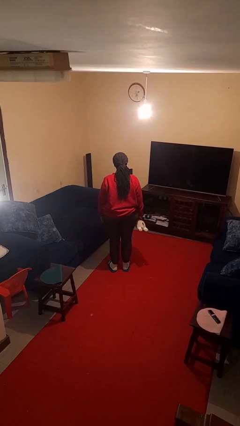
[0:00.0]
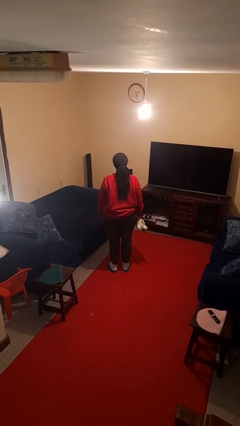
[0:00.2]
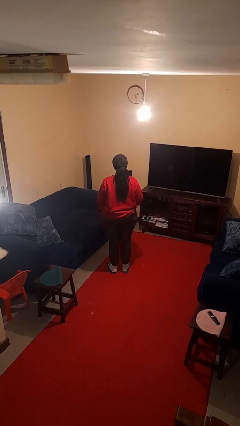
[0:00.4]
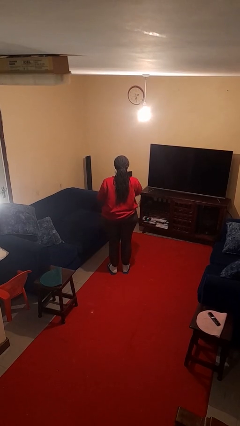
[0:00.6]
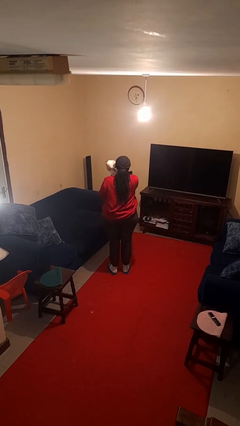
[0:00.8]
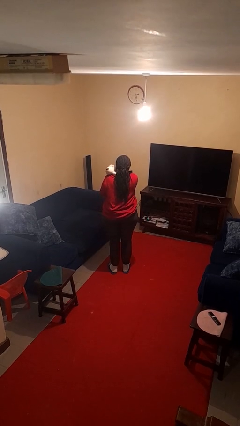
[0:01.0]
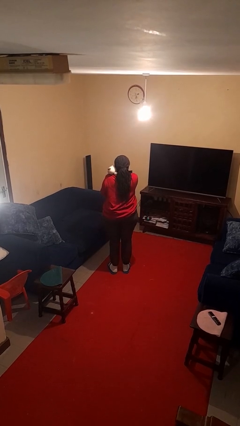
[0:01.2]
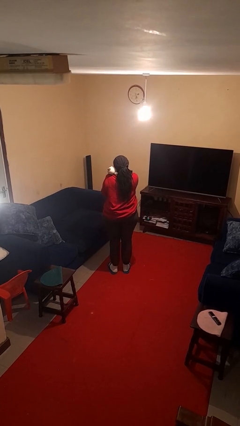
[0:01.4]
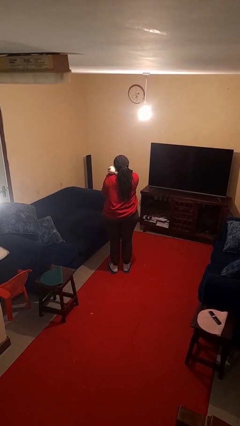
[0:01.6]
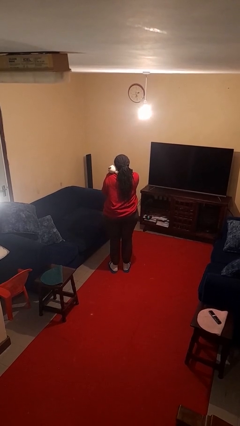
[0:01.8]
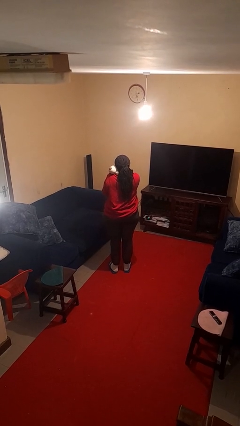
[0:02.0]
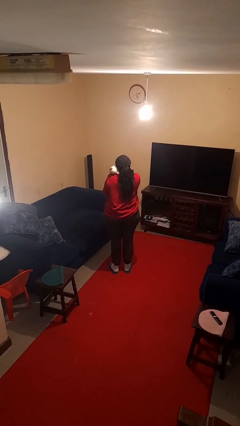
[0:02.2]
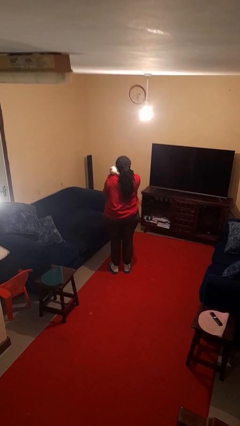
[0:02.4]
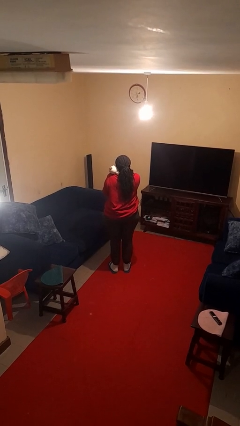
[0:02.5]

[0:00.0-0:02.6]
person hugs stuffed animal

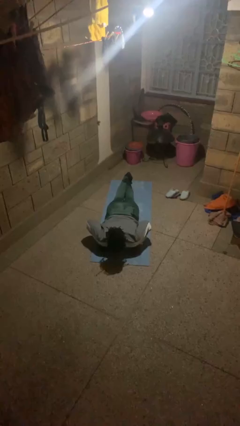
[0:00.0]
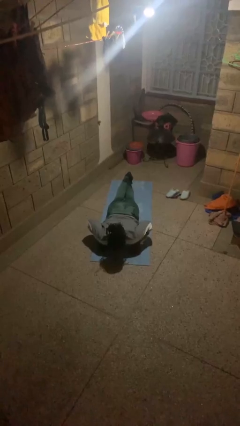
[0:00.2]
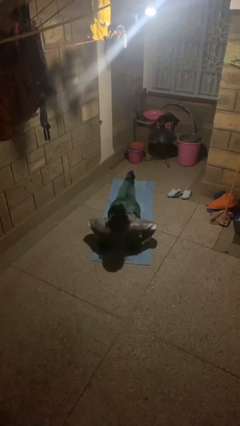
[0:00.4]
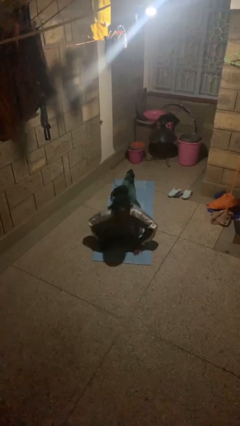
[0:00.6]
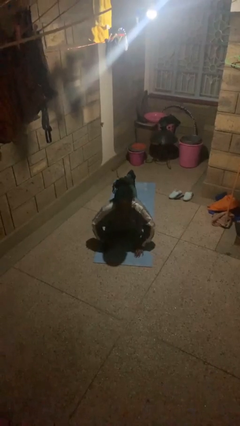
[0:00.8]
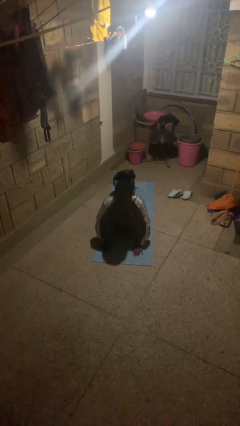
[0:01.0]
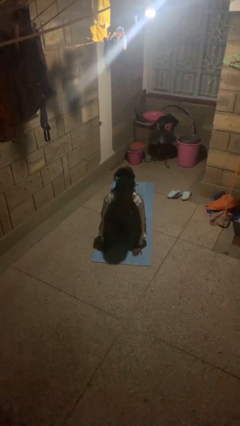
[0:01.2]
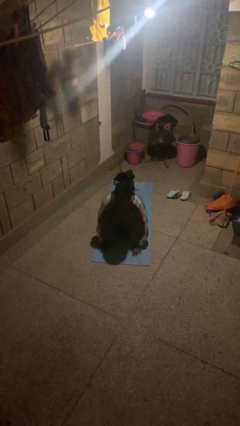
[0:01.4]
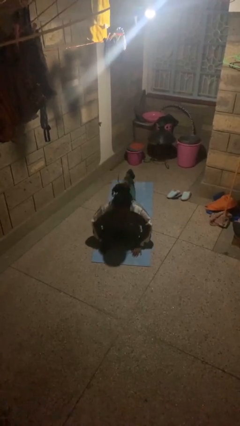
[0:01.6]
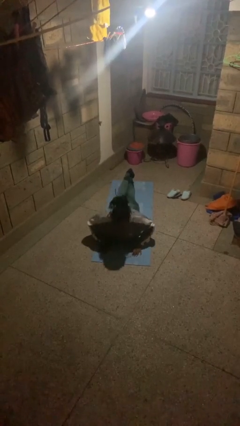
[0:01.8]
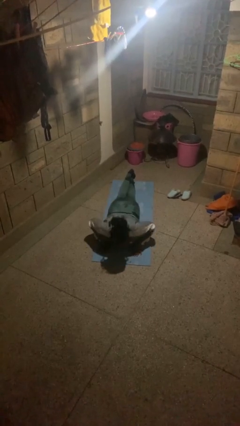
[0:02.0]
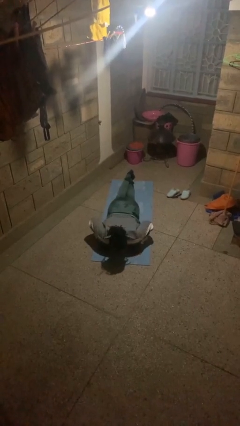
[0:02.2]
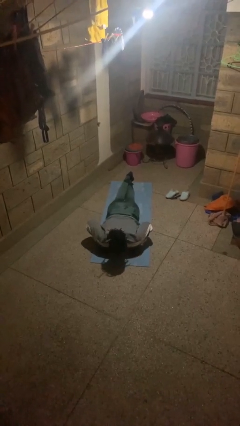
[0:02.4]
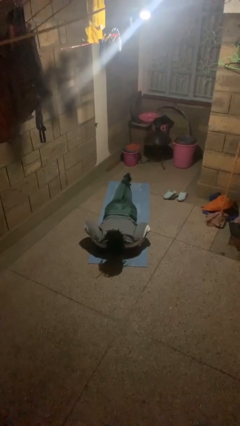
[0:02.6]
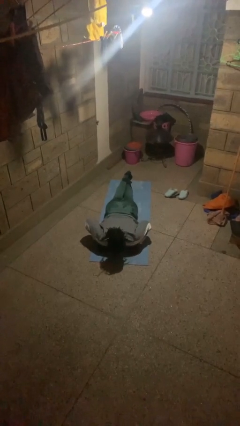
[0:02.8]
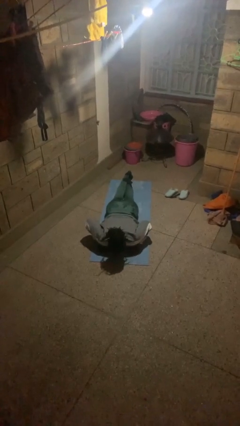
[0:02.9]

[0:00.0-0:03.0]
person exercises with pushup

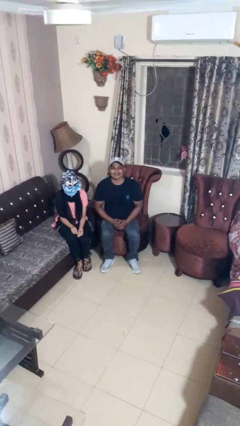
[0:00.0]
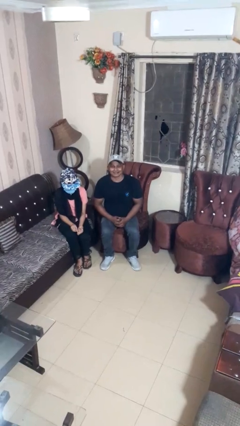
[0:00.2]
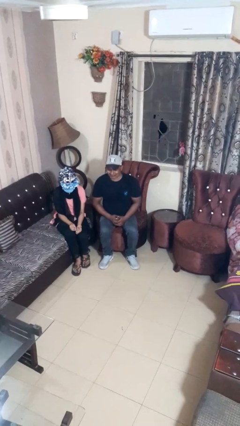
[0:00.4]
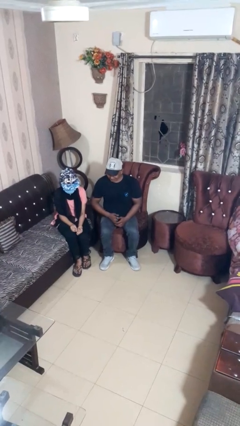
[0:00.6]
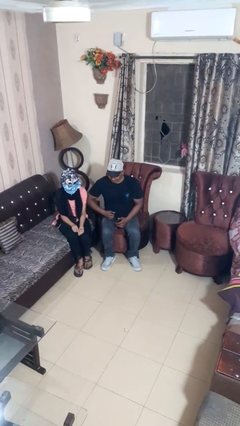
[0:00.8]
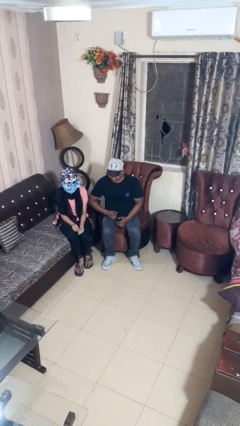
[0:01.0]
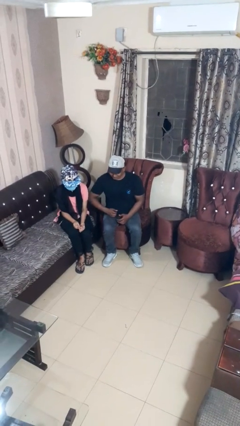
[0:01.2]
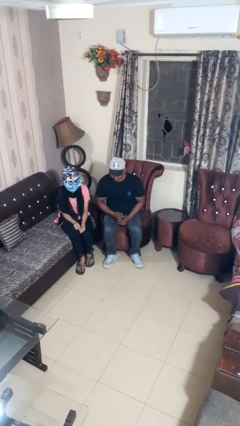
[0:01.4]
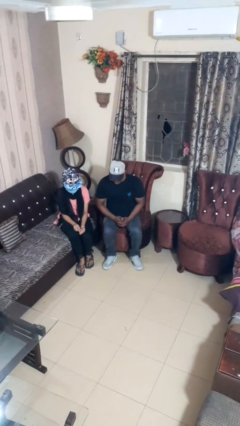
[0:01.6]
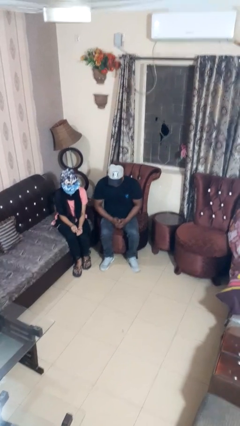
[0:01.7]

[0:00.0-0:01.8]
person nudges person with elbow

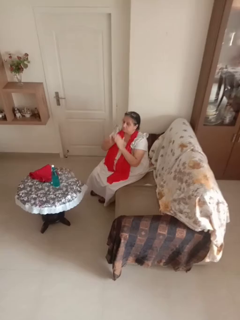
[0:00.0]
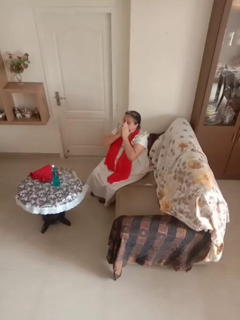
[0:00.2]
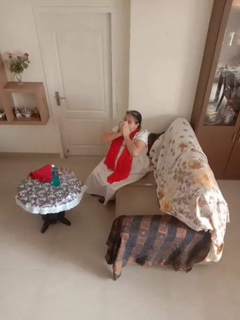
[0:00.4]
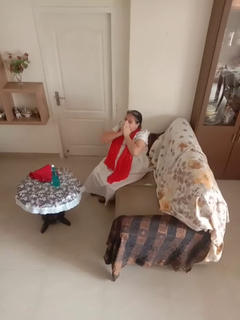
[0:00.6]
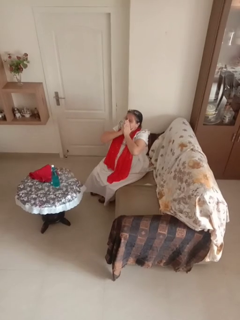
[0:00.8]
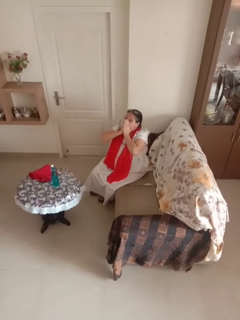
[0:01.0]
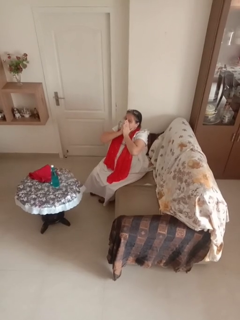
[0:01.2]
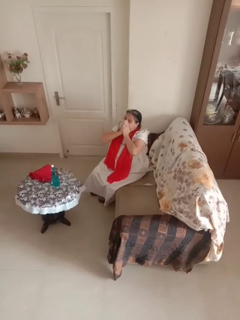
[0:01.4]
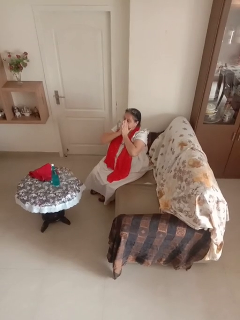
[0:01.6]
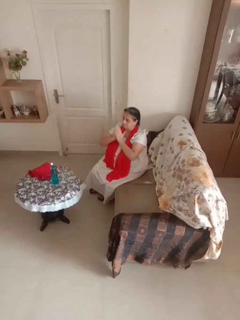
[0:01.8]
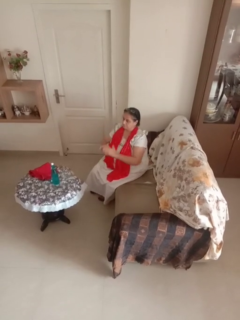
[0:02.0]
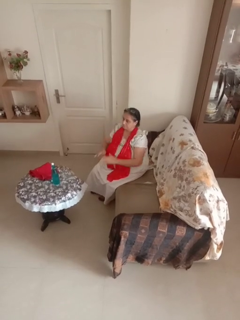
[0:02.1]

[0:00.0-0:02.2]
person covers face with hands

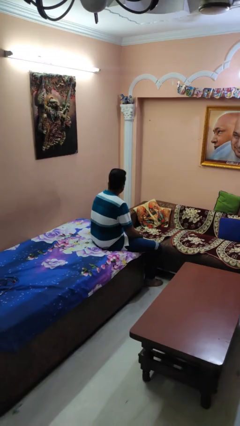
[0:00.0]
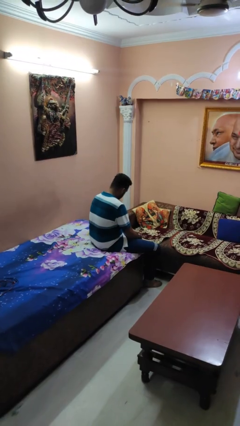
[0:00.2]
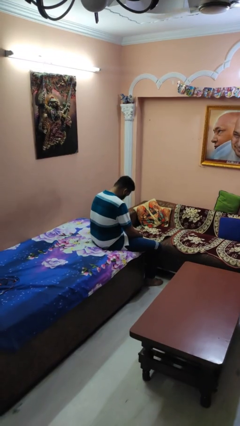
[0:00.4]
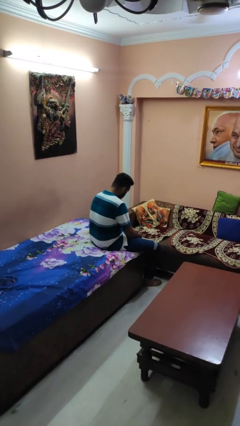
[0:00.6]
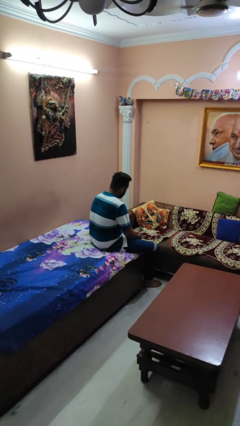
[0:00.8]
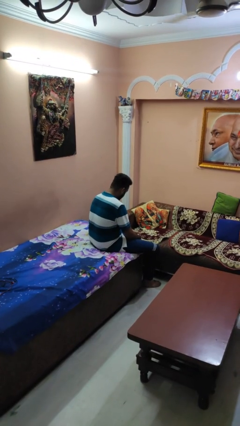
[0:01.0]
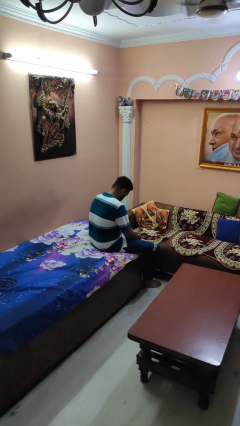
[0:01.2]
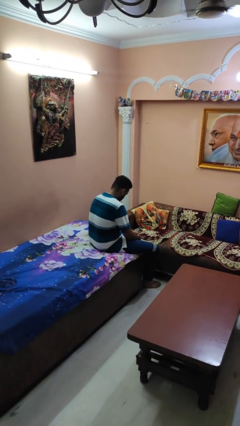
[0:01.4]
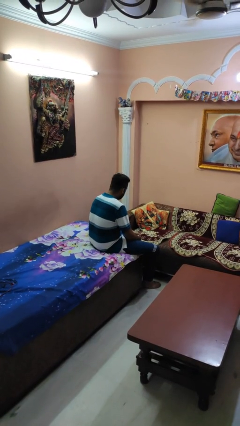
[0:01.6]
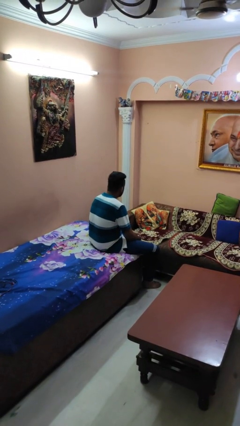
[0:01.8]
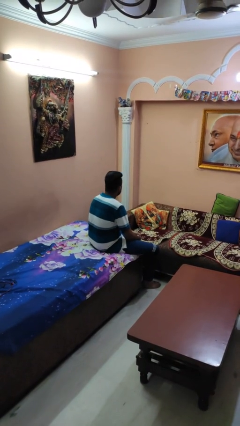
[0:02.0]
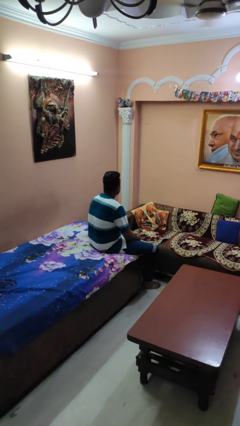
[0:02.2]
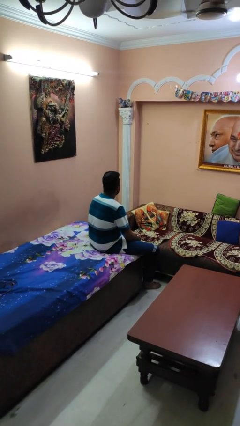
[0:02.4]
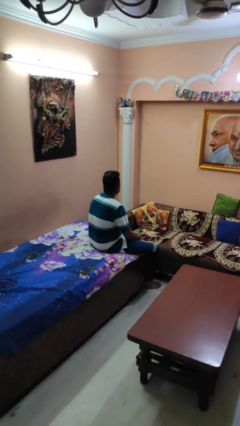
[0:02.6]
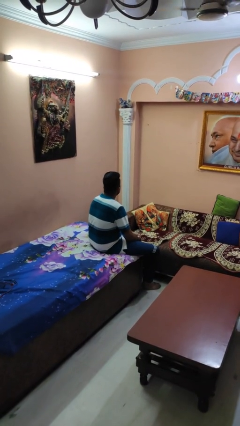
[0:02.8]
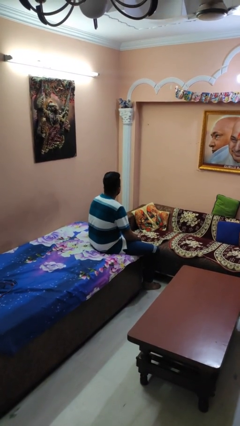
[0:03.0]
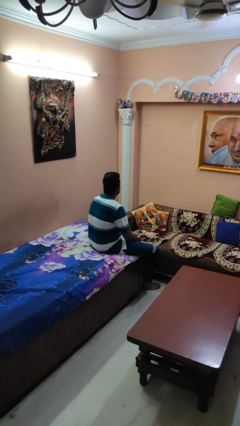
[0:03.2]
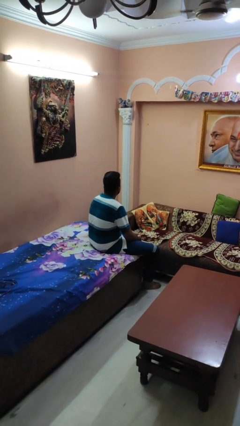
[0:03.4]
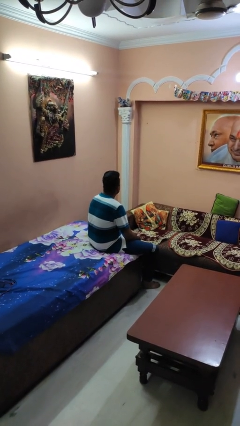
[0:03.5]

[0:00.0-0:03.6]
person nods head

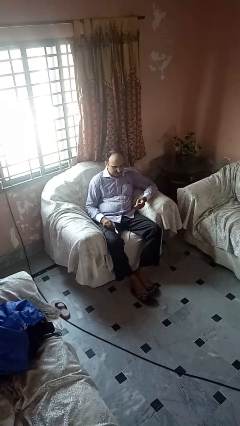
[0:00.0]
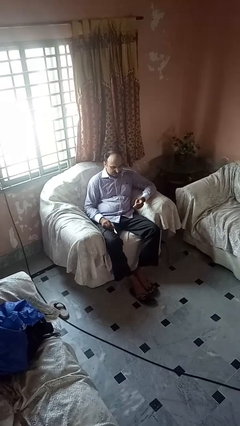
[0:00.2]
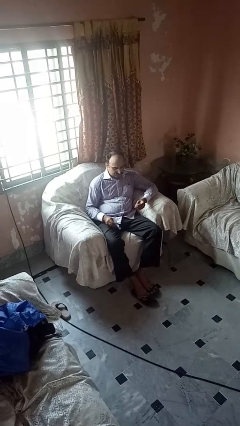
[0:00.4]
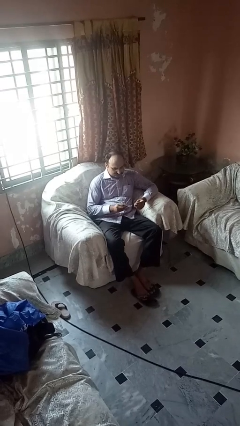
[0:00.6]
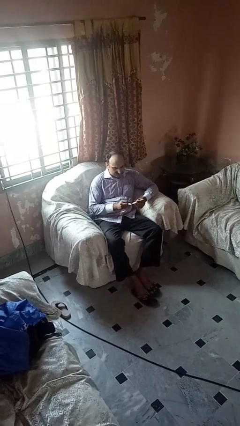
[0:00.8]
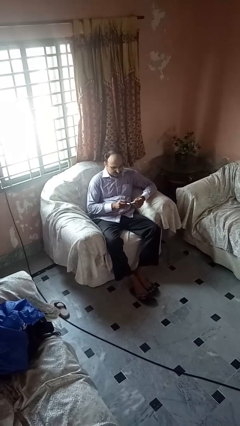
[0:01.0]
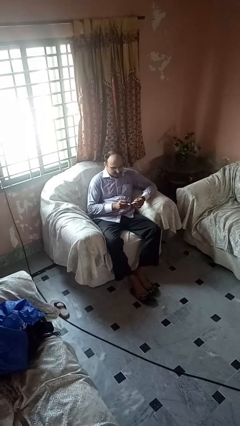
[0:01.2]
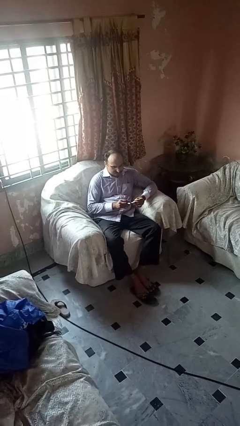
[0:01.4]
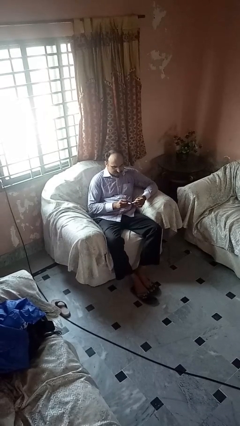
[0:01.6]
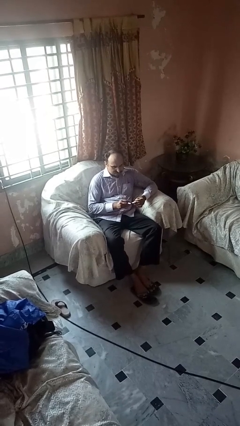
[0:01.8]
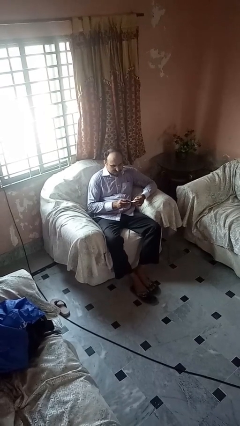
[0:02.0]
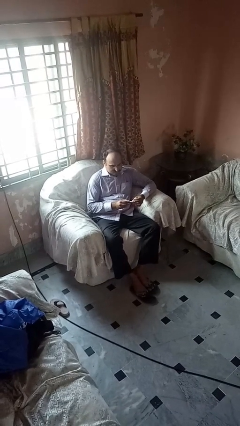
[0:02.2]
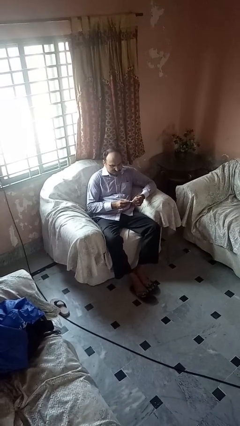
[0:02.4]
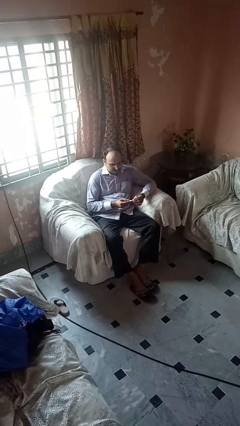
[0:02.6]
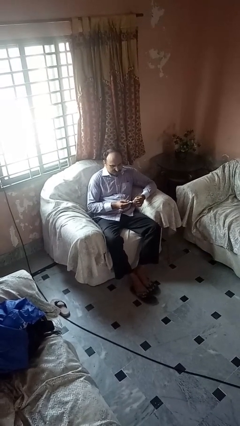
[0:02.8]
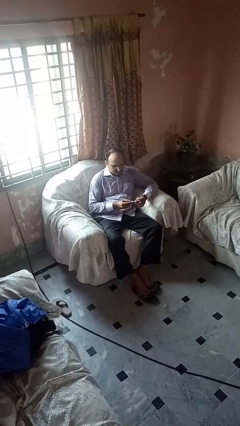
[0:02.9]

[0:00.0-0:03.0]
person files fingernails

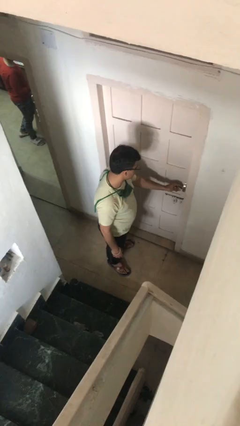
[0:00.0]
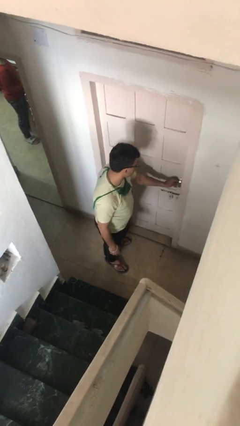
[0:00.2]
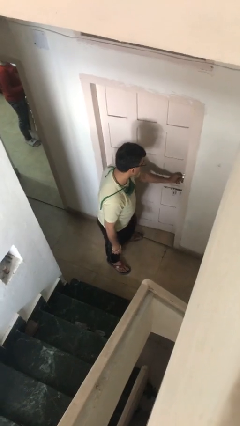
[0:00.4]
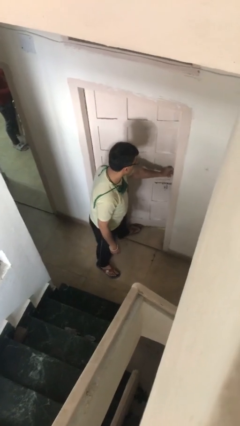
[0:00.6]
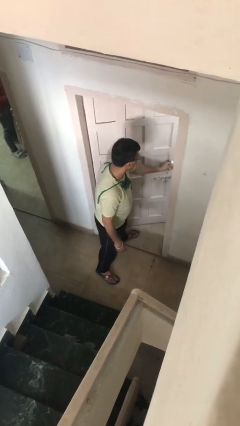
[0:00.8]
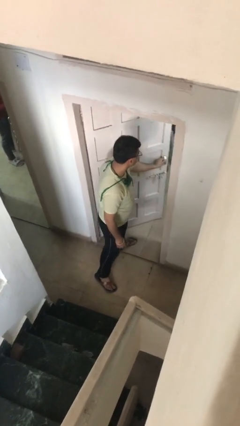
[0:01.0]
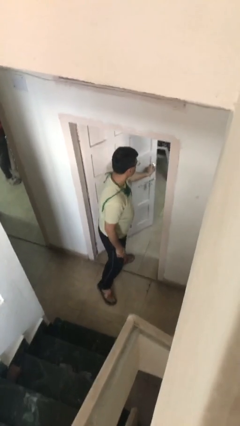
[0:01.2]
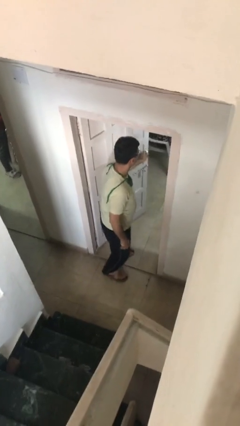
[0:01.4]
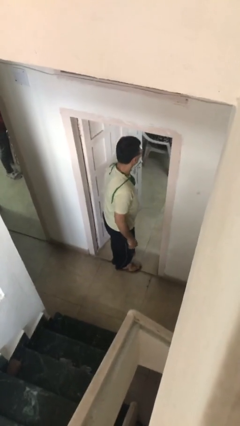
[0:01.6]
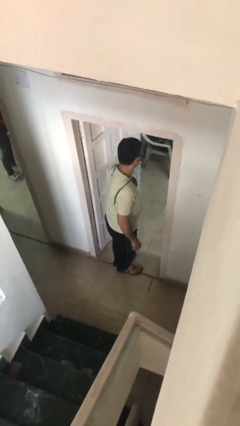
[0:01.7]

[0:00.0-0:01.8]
person opens facility door
